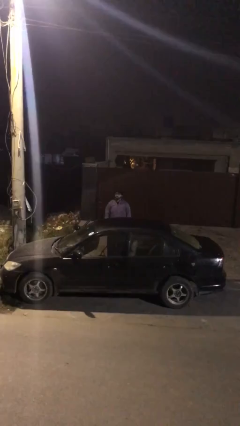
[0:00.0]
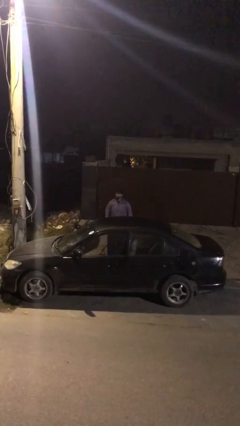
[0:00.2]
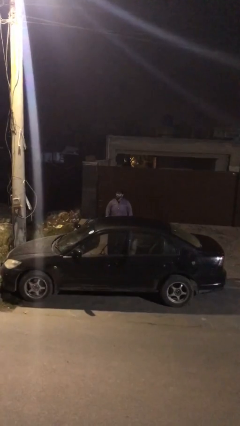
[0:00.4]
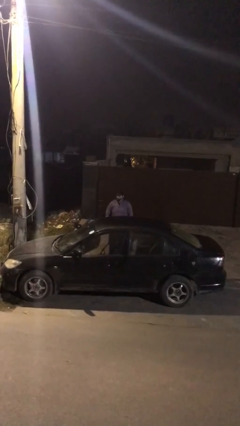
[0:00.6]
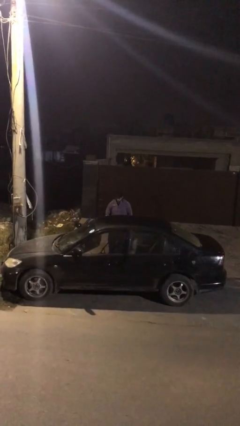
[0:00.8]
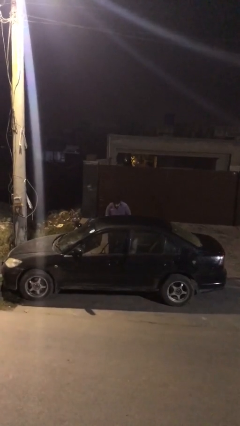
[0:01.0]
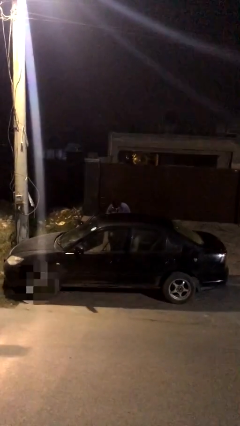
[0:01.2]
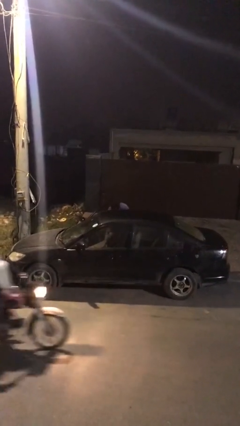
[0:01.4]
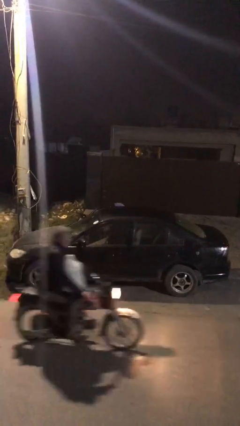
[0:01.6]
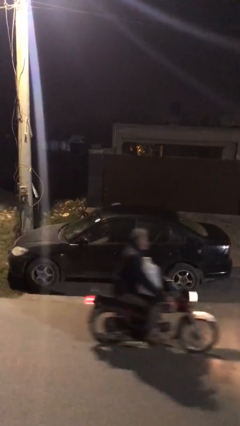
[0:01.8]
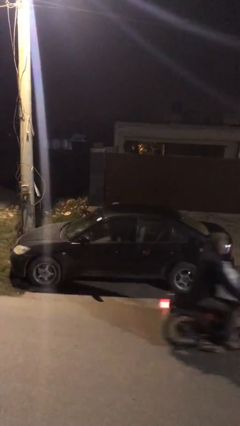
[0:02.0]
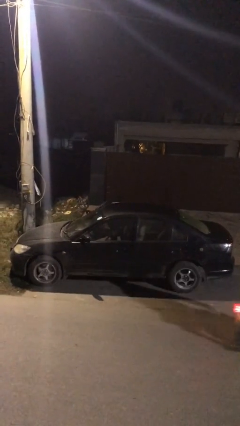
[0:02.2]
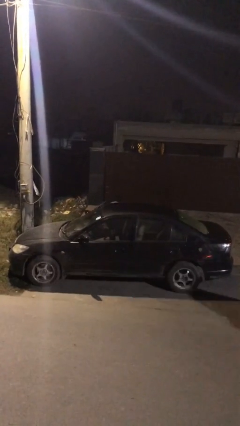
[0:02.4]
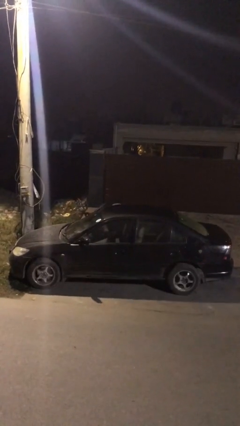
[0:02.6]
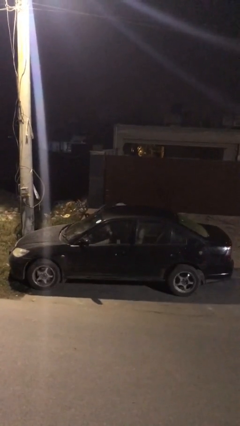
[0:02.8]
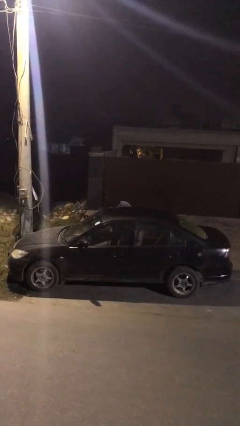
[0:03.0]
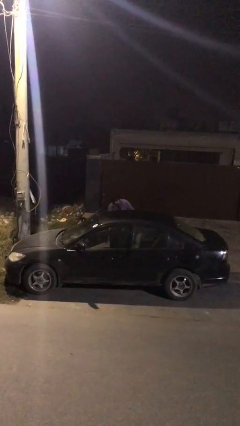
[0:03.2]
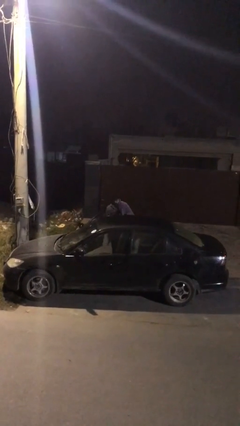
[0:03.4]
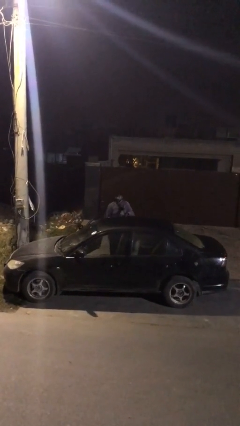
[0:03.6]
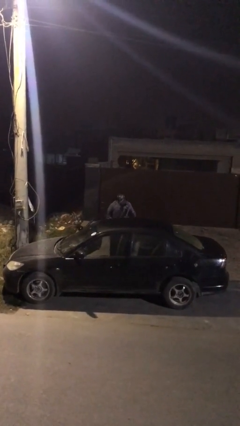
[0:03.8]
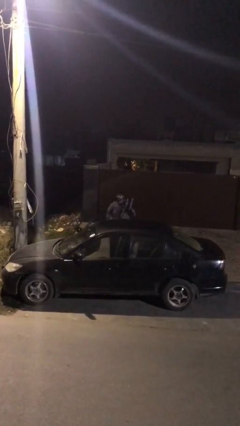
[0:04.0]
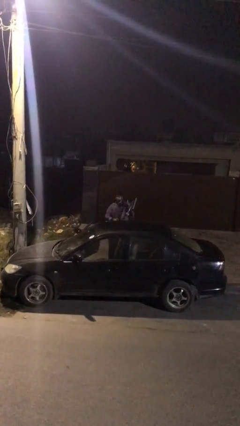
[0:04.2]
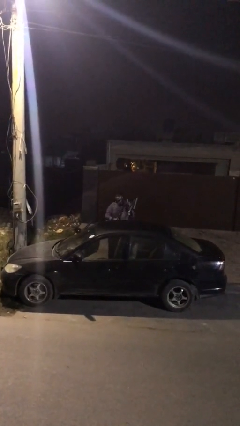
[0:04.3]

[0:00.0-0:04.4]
person unloads car

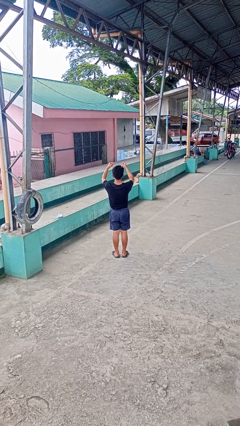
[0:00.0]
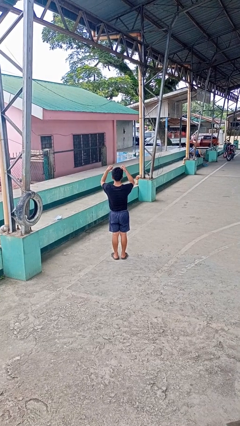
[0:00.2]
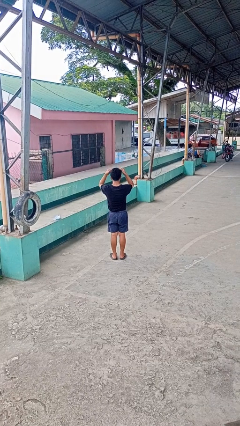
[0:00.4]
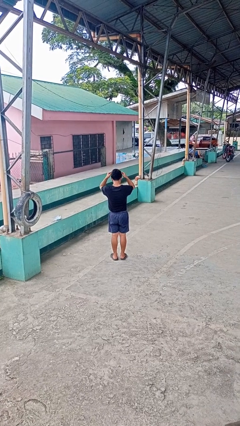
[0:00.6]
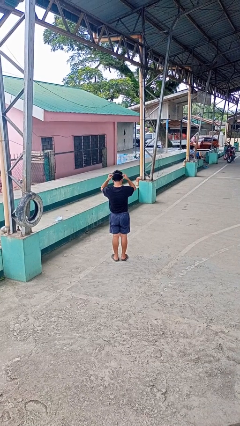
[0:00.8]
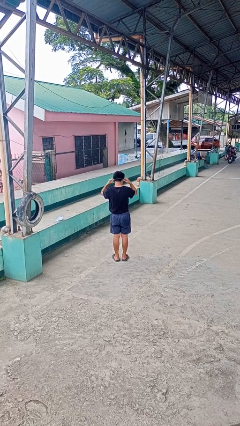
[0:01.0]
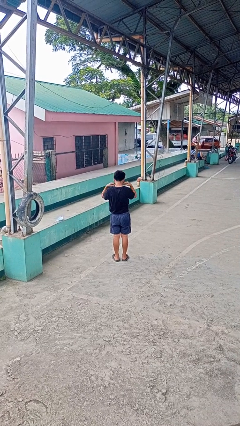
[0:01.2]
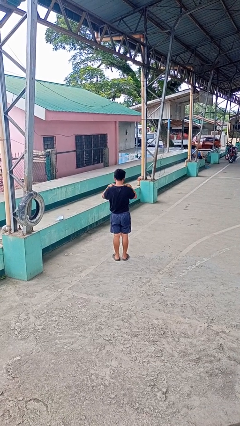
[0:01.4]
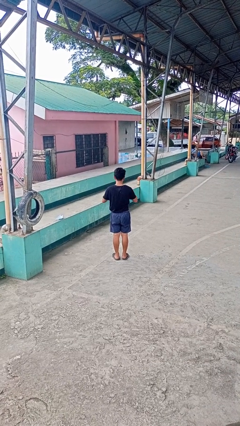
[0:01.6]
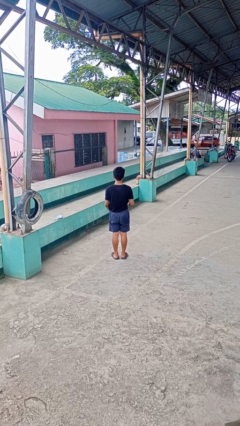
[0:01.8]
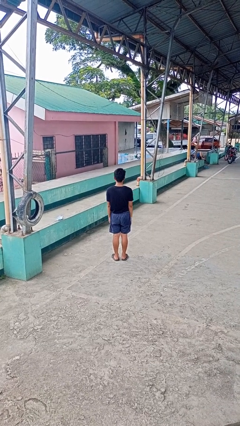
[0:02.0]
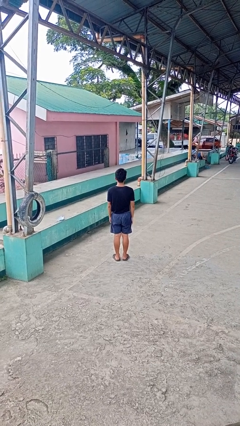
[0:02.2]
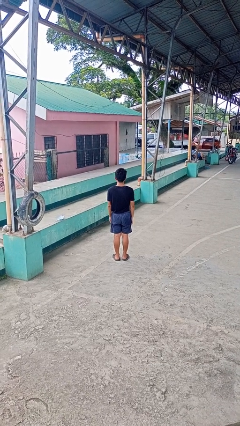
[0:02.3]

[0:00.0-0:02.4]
person puts on necklace

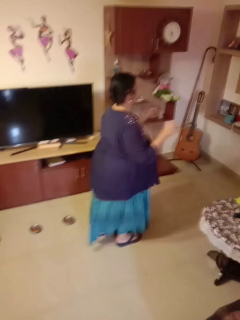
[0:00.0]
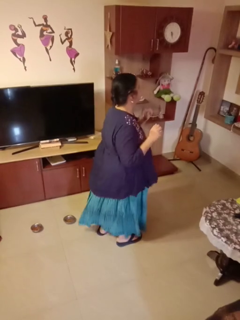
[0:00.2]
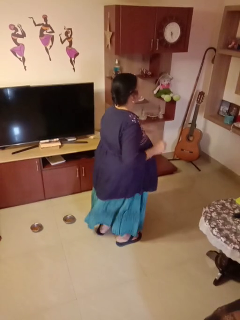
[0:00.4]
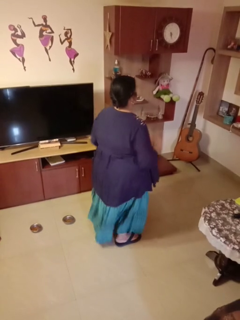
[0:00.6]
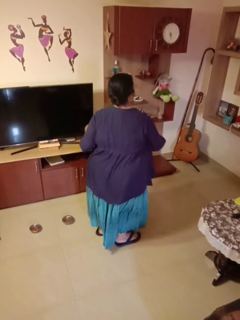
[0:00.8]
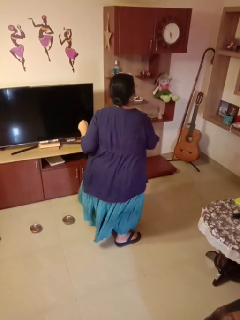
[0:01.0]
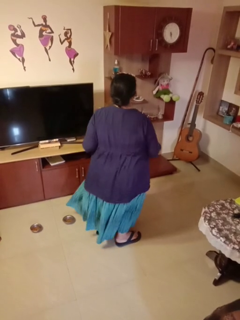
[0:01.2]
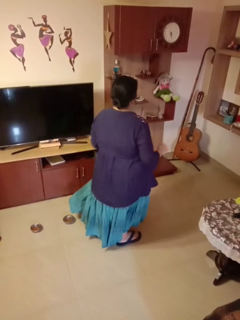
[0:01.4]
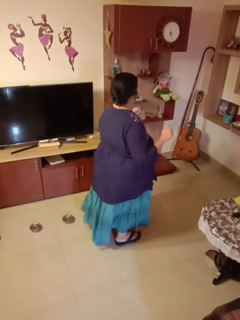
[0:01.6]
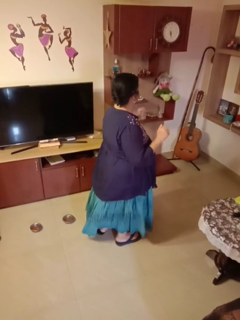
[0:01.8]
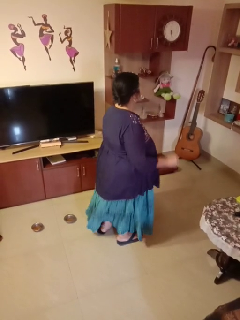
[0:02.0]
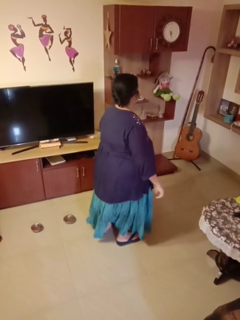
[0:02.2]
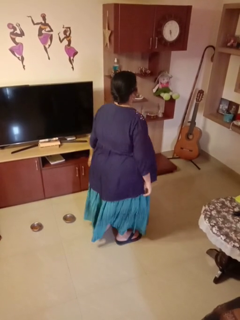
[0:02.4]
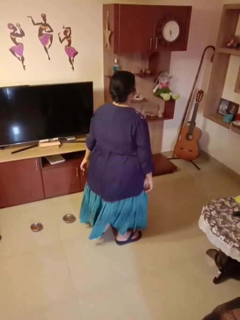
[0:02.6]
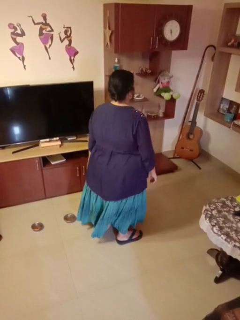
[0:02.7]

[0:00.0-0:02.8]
person dances in place

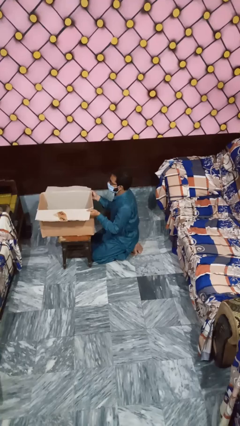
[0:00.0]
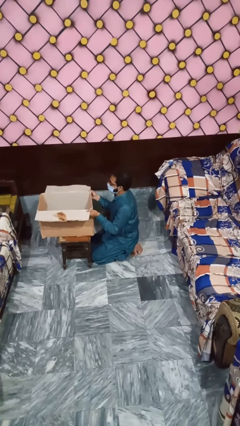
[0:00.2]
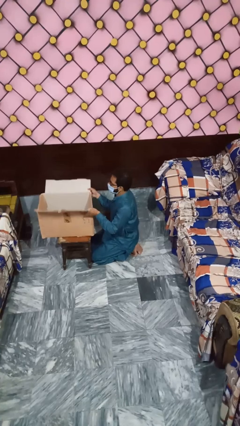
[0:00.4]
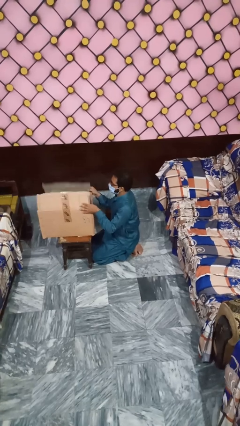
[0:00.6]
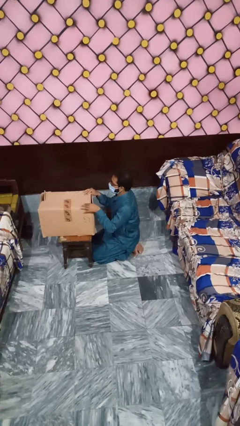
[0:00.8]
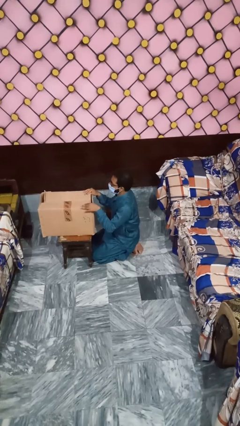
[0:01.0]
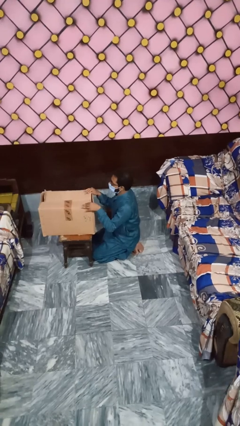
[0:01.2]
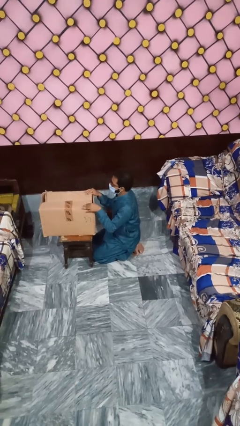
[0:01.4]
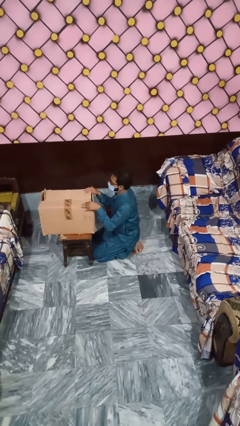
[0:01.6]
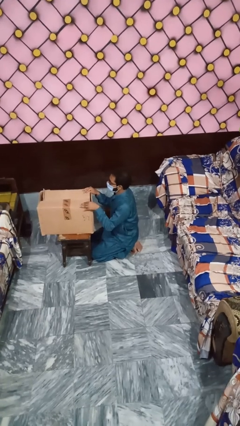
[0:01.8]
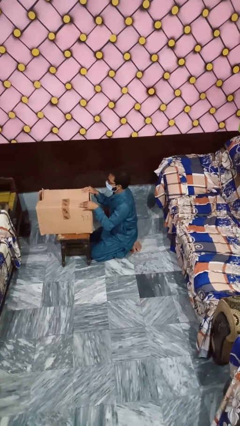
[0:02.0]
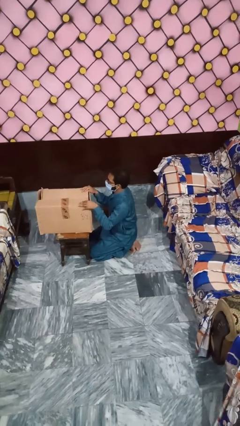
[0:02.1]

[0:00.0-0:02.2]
person closes box

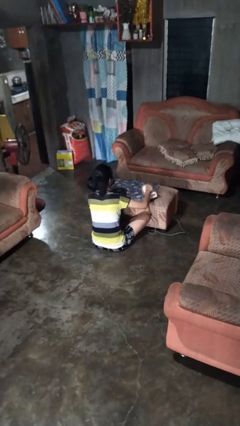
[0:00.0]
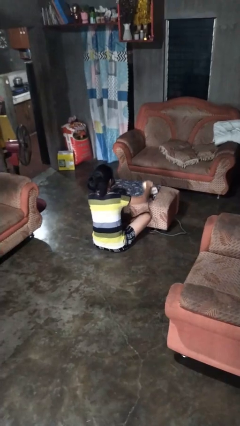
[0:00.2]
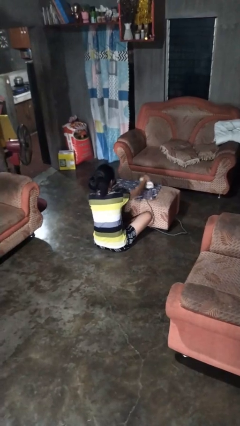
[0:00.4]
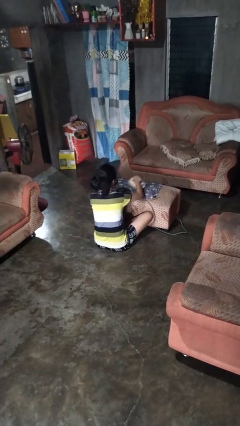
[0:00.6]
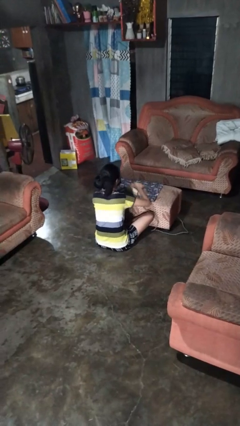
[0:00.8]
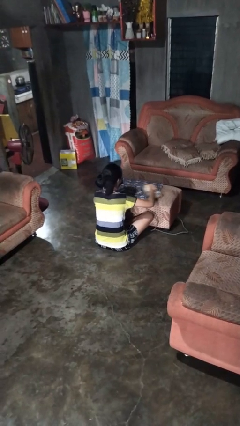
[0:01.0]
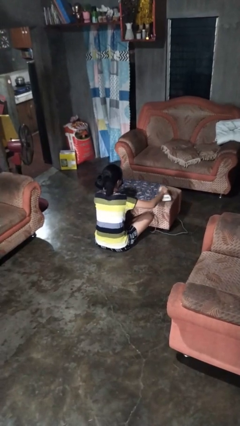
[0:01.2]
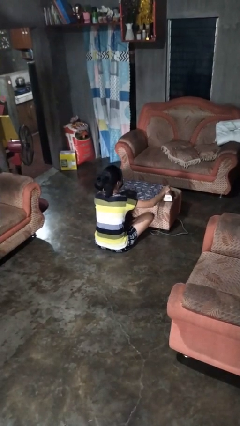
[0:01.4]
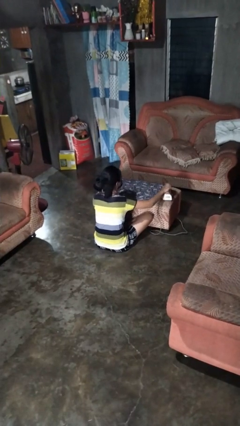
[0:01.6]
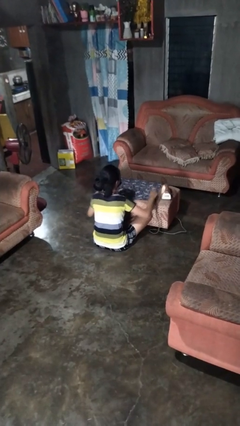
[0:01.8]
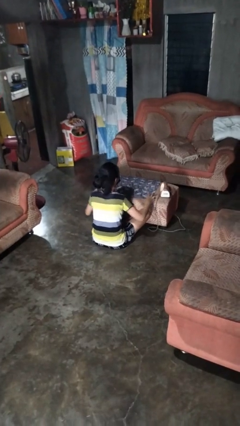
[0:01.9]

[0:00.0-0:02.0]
person irons clothes

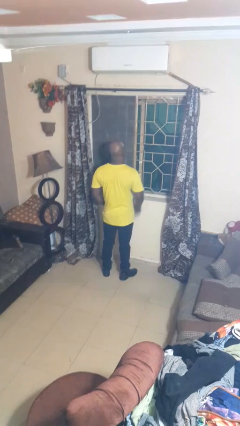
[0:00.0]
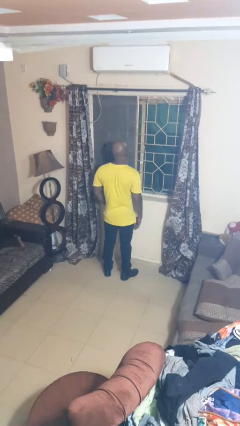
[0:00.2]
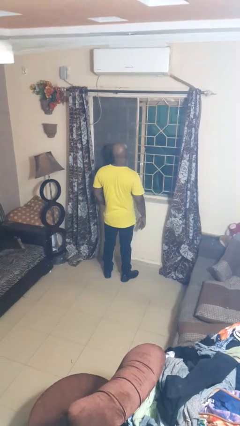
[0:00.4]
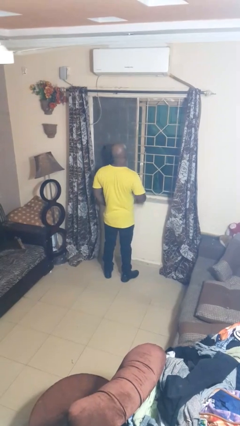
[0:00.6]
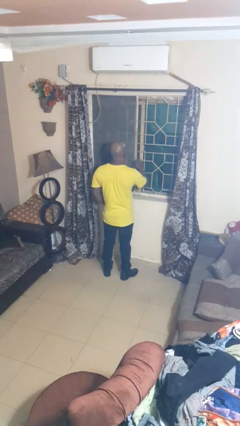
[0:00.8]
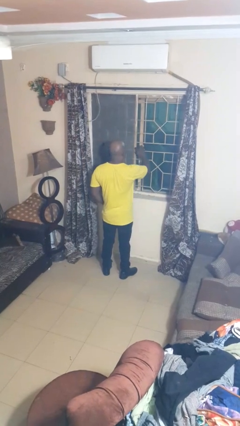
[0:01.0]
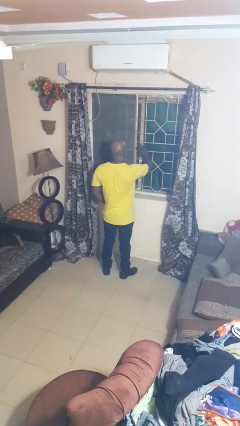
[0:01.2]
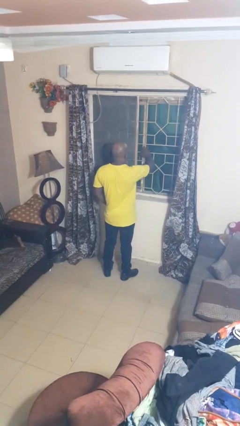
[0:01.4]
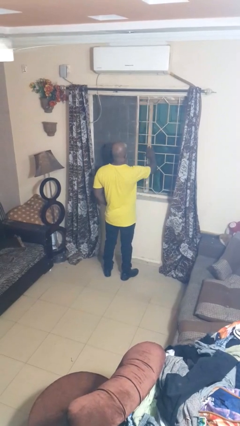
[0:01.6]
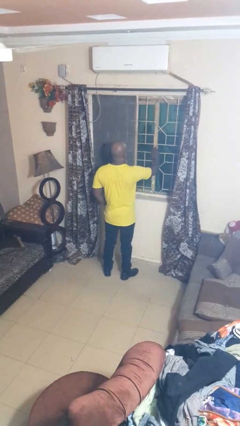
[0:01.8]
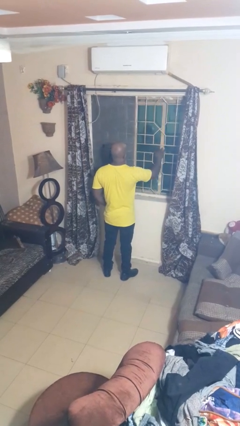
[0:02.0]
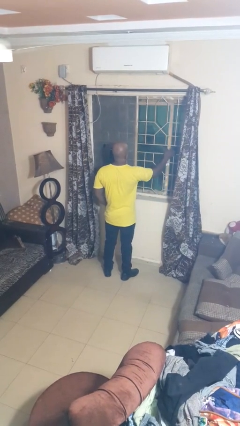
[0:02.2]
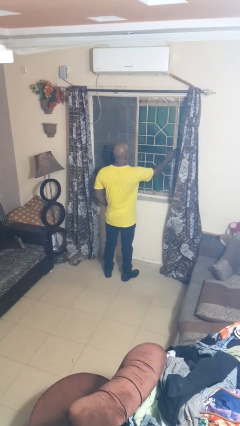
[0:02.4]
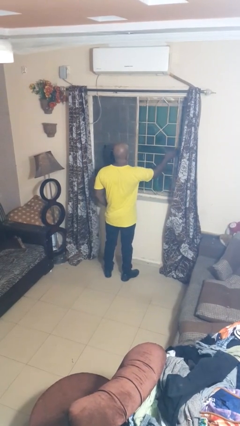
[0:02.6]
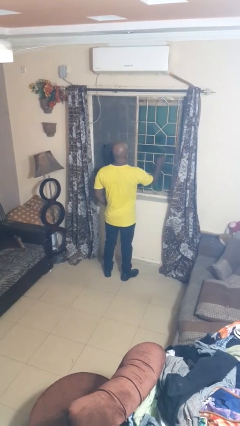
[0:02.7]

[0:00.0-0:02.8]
person opens home window

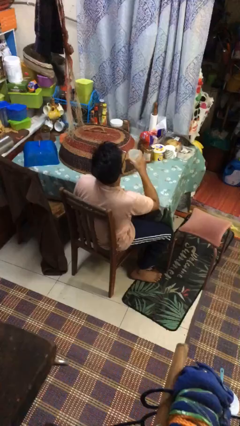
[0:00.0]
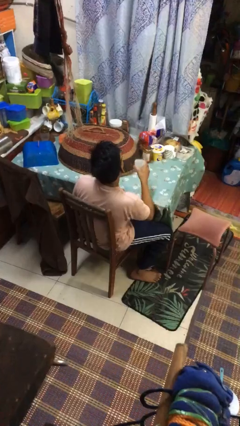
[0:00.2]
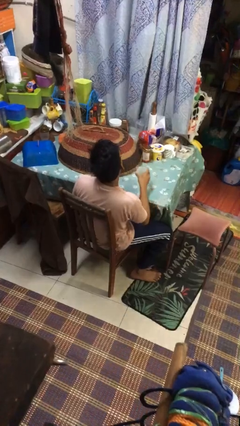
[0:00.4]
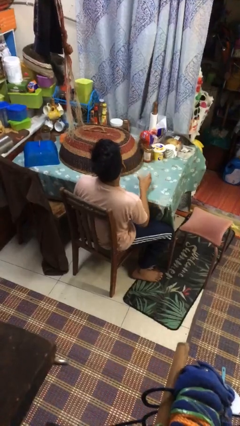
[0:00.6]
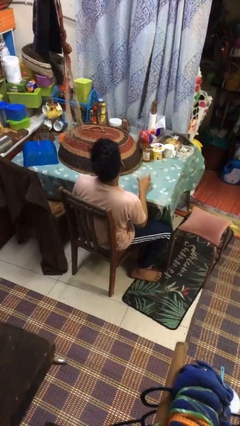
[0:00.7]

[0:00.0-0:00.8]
person puts down object on table

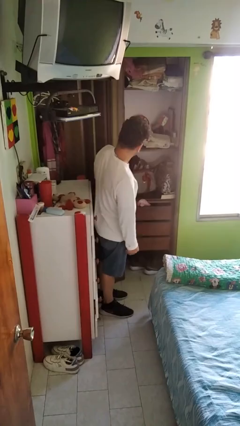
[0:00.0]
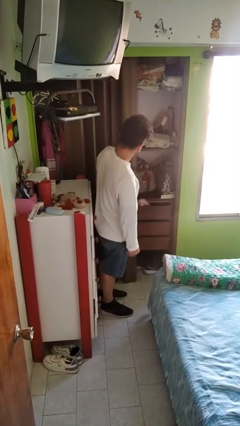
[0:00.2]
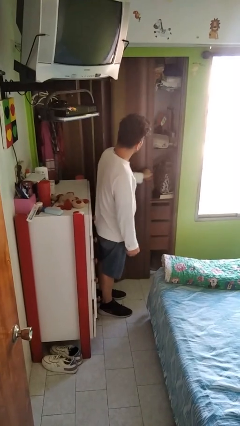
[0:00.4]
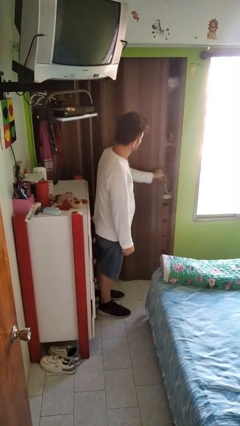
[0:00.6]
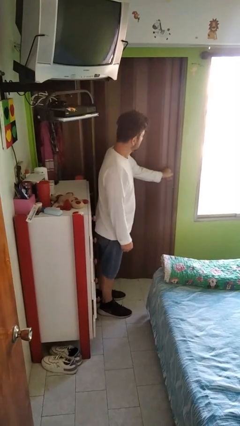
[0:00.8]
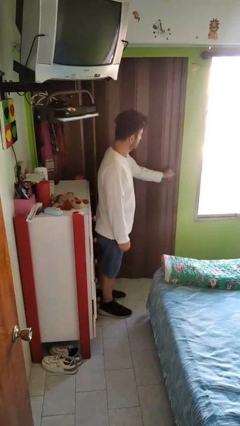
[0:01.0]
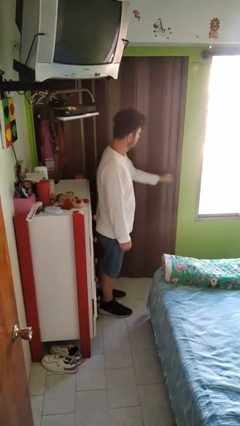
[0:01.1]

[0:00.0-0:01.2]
person closes sliding door
